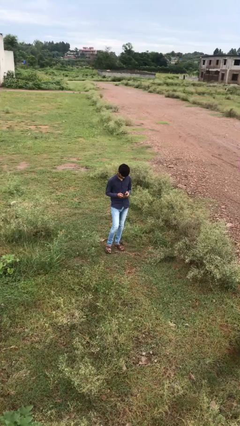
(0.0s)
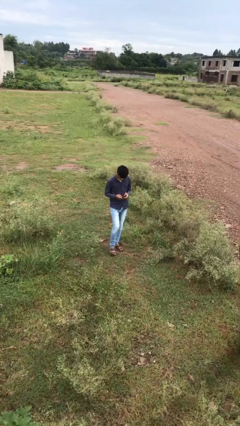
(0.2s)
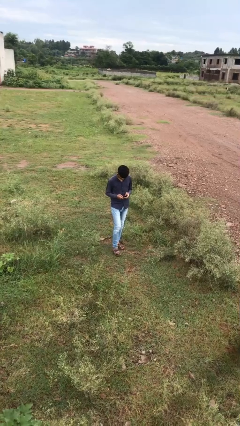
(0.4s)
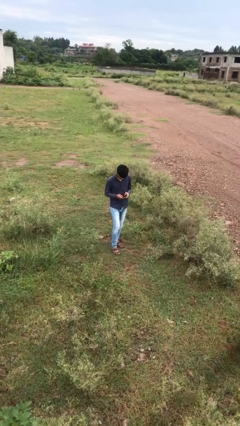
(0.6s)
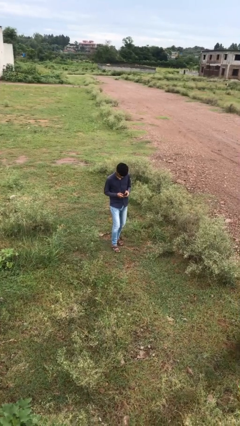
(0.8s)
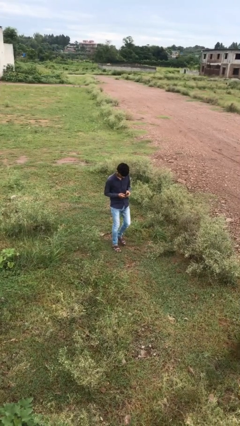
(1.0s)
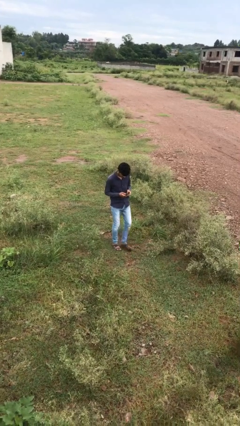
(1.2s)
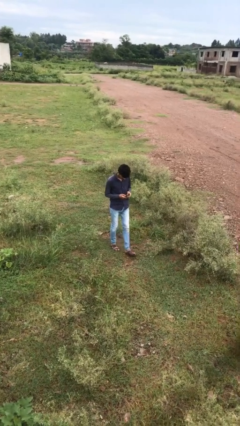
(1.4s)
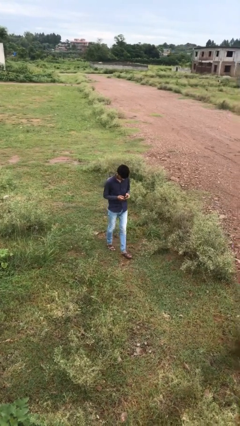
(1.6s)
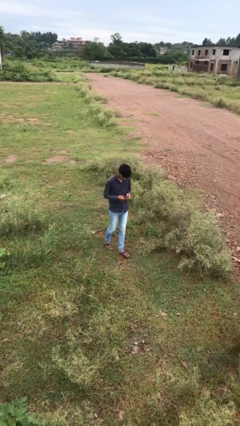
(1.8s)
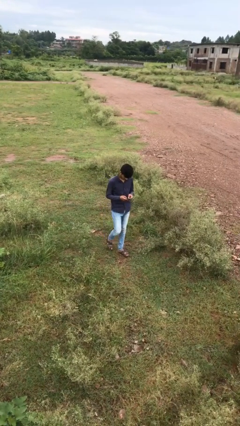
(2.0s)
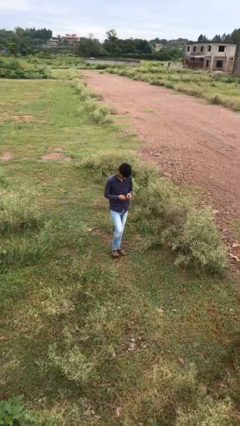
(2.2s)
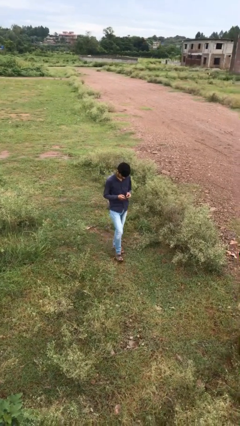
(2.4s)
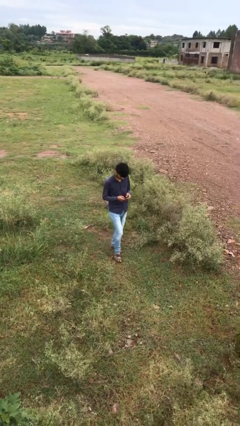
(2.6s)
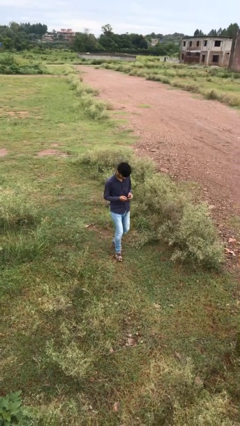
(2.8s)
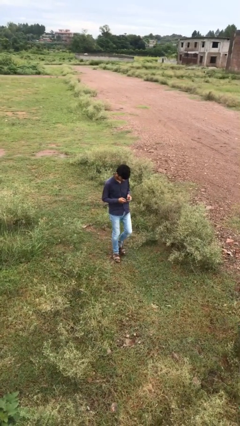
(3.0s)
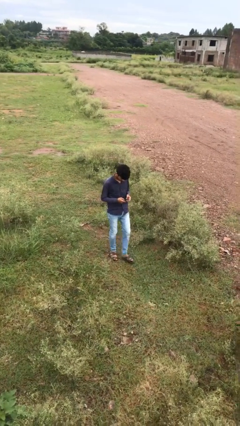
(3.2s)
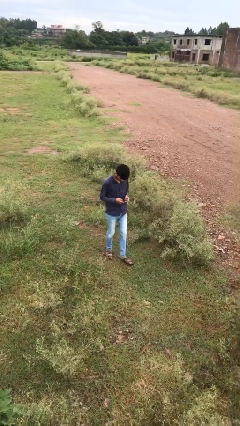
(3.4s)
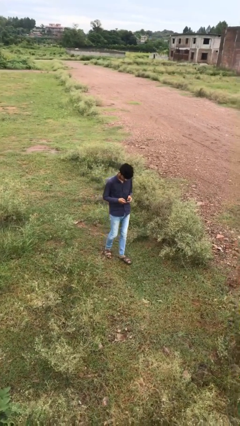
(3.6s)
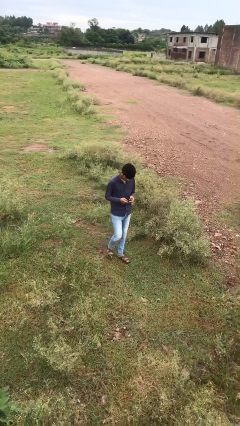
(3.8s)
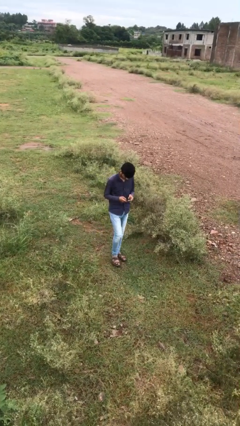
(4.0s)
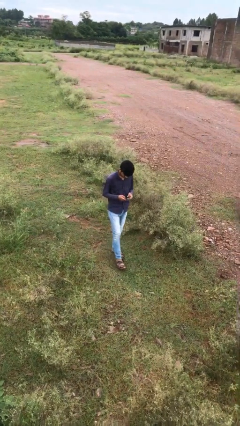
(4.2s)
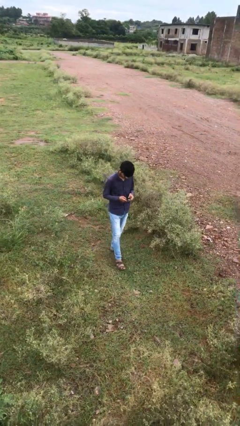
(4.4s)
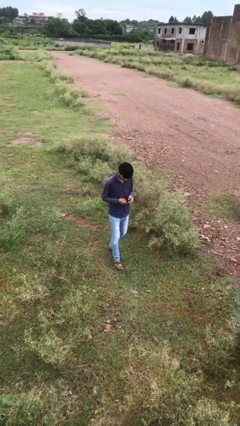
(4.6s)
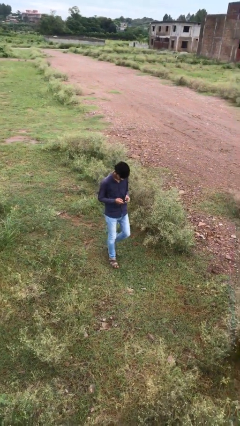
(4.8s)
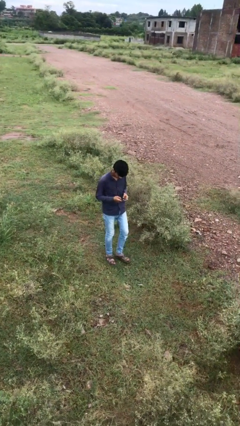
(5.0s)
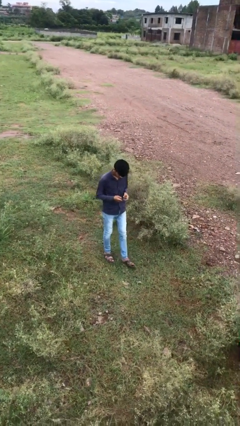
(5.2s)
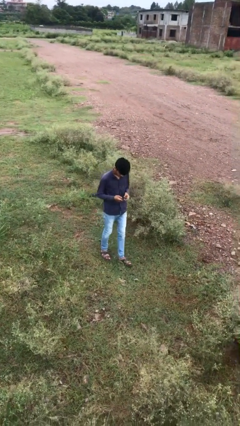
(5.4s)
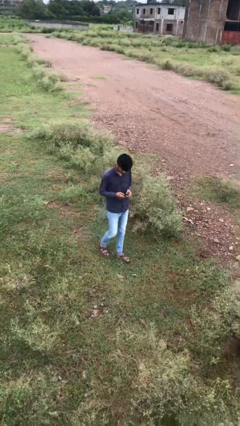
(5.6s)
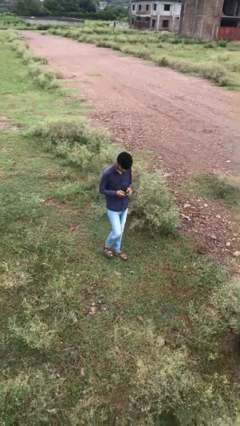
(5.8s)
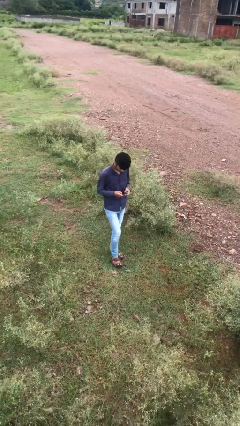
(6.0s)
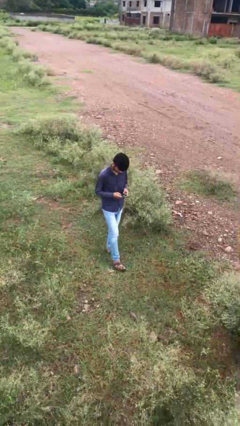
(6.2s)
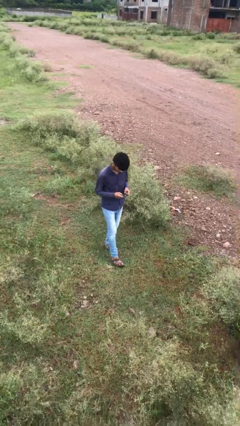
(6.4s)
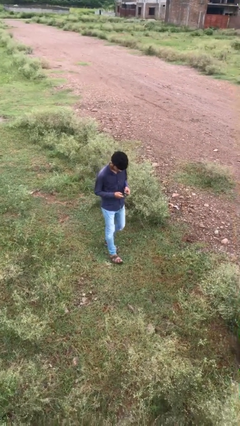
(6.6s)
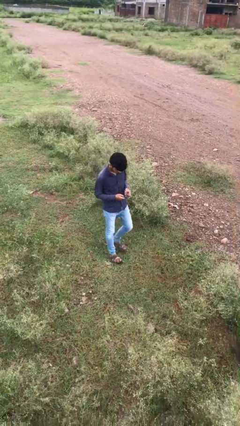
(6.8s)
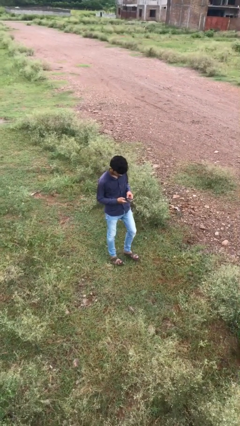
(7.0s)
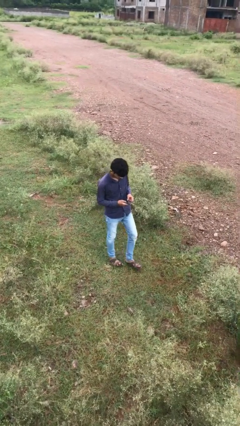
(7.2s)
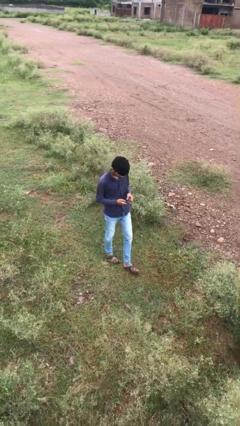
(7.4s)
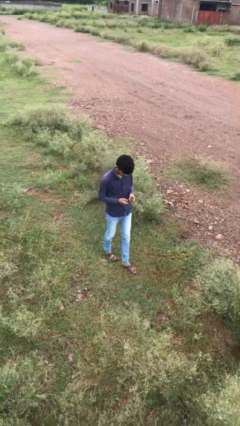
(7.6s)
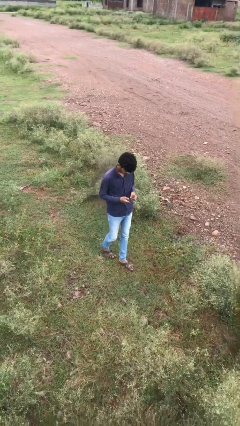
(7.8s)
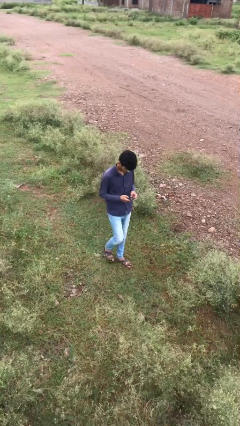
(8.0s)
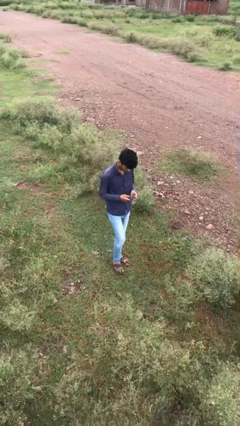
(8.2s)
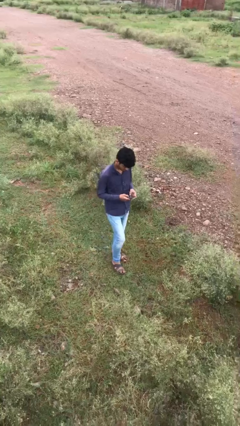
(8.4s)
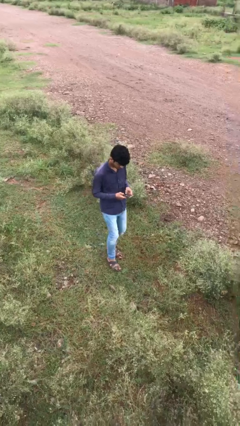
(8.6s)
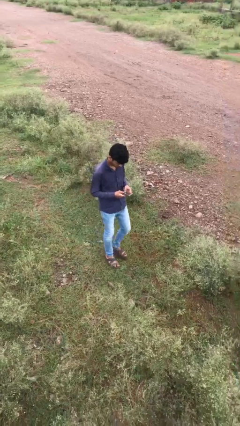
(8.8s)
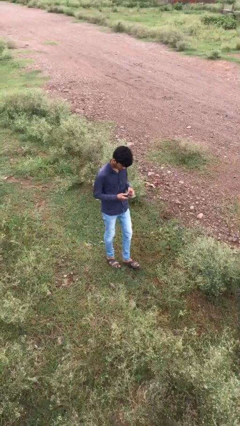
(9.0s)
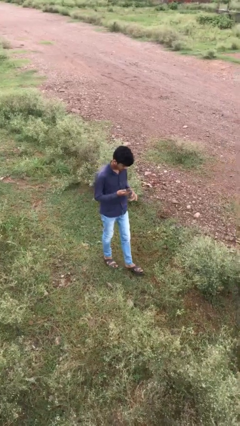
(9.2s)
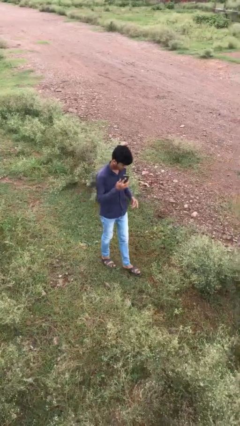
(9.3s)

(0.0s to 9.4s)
person texts on phone

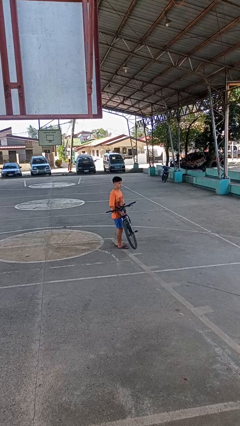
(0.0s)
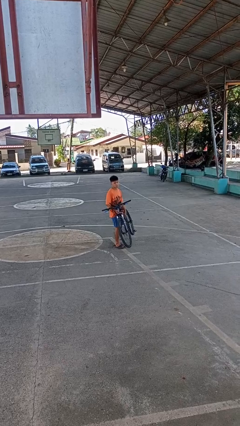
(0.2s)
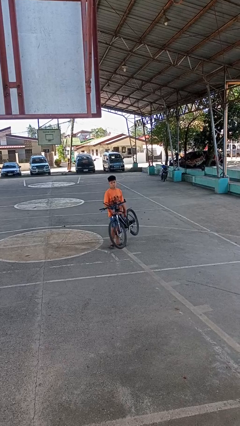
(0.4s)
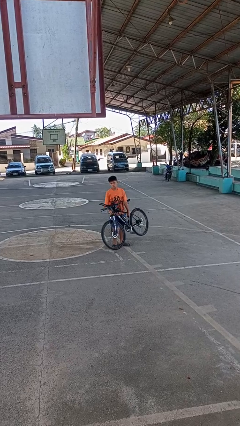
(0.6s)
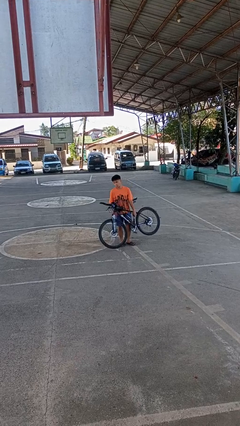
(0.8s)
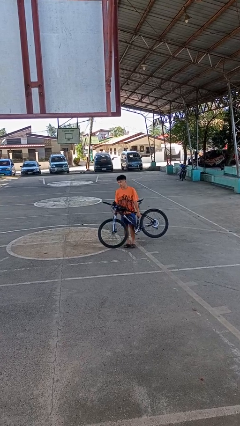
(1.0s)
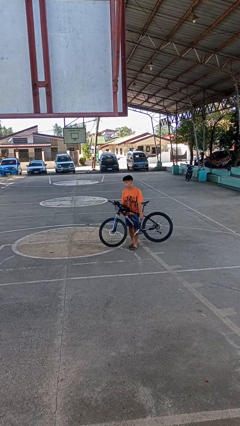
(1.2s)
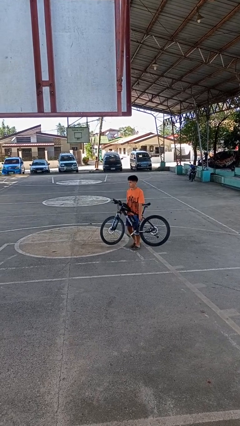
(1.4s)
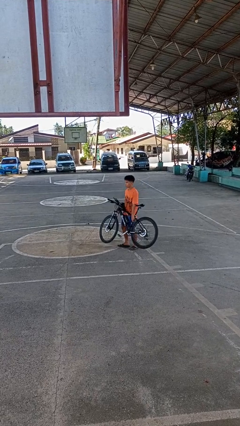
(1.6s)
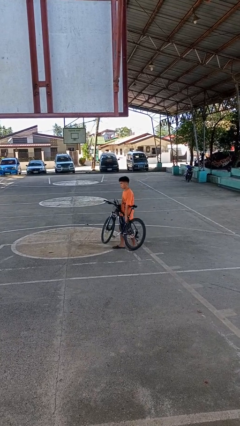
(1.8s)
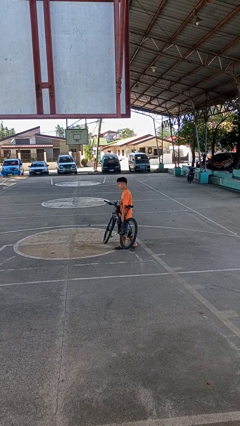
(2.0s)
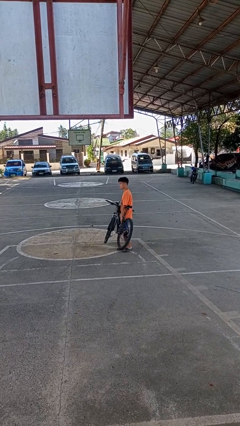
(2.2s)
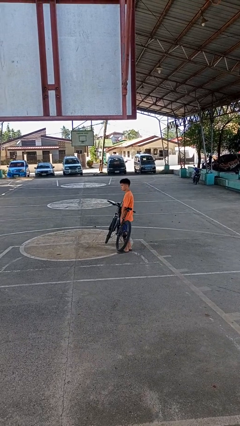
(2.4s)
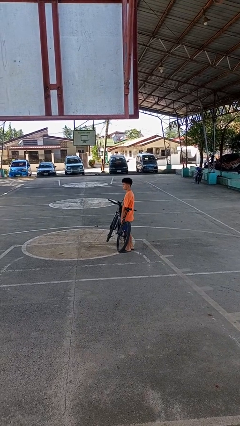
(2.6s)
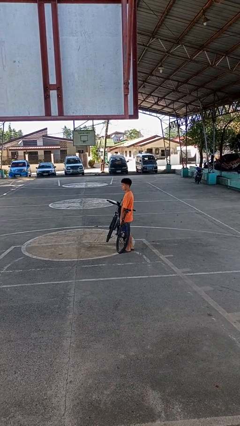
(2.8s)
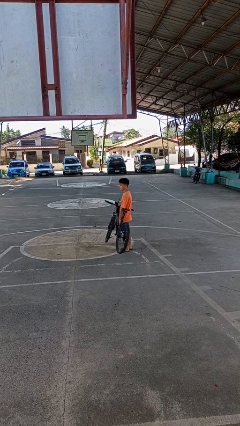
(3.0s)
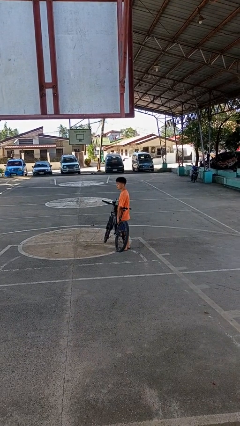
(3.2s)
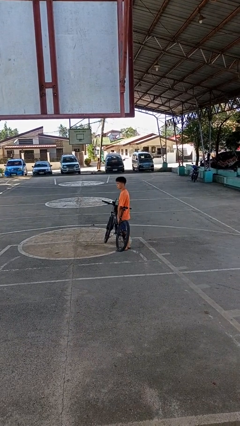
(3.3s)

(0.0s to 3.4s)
person carries bicycle

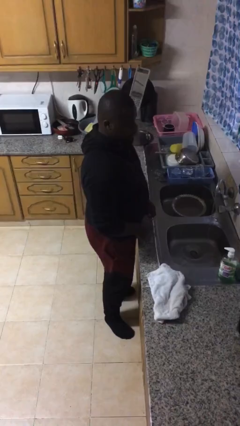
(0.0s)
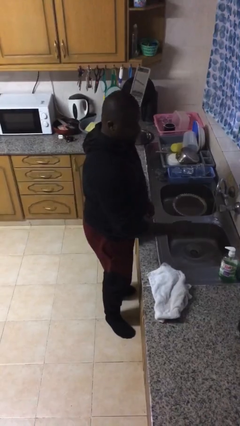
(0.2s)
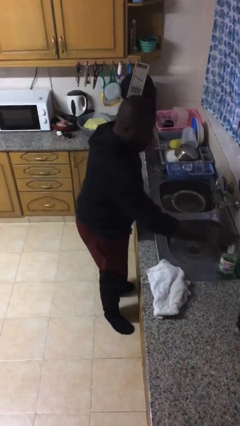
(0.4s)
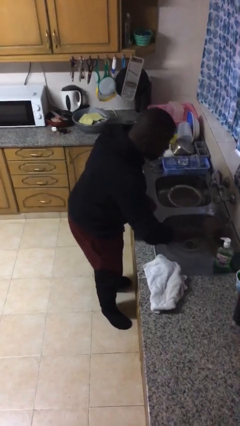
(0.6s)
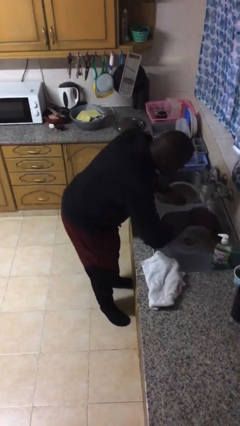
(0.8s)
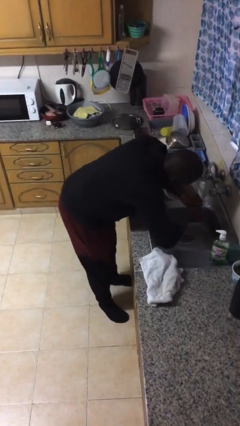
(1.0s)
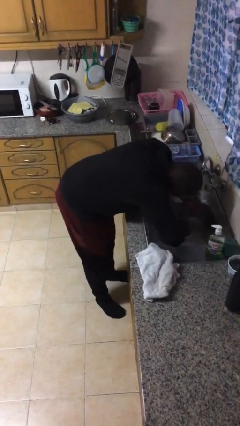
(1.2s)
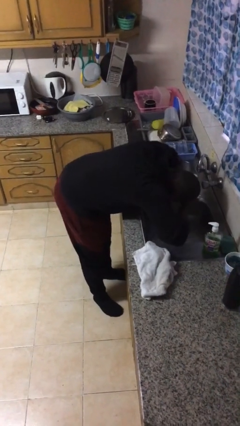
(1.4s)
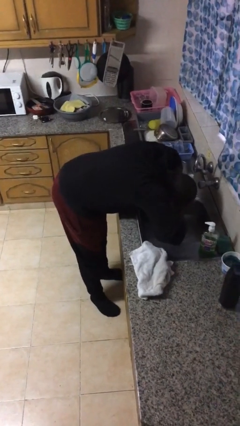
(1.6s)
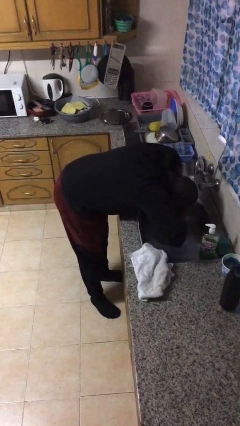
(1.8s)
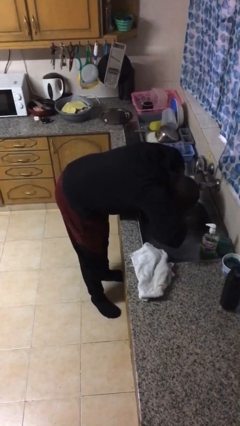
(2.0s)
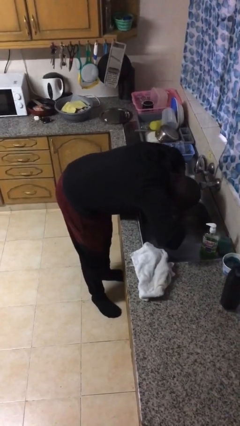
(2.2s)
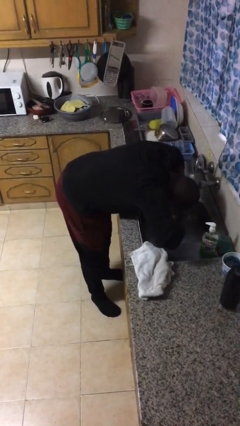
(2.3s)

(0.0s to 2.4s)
person washes face

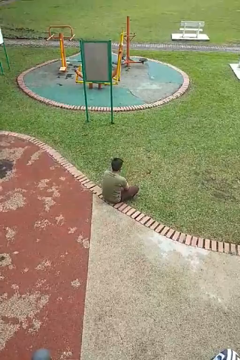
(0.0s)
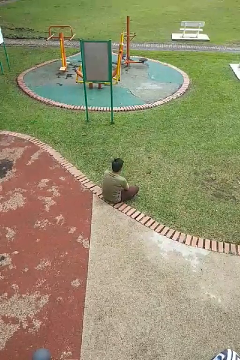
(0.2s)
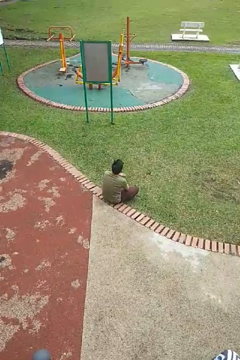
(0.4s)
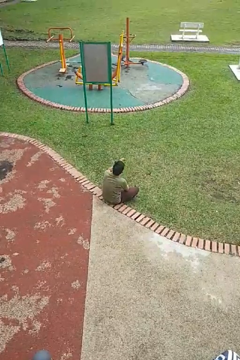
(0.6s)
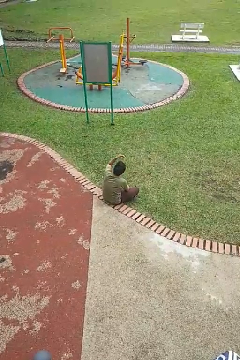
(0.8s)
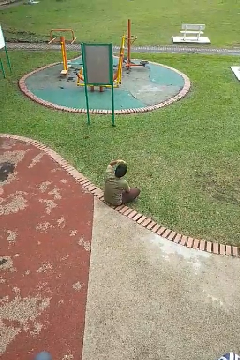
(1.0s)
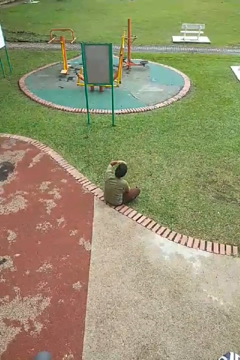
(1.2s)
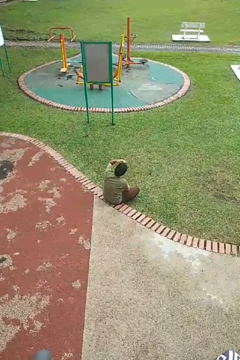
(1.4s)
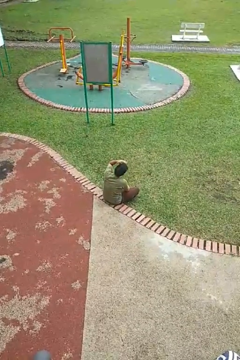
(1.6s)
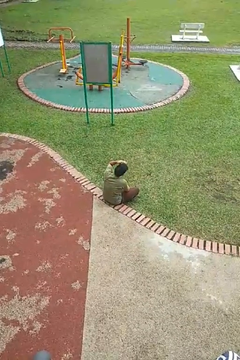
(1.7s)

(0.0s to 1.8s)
person shades eyes

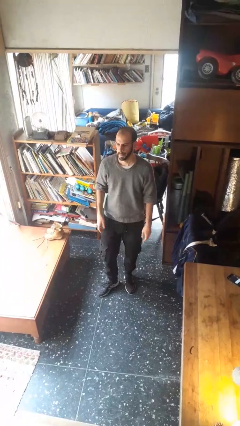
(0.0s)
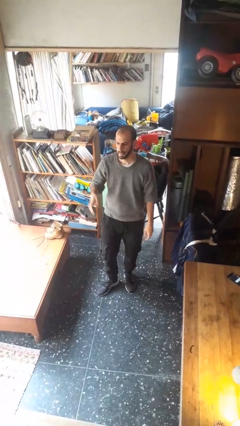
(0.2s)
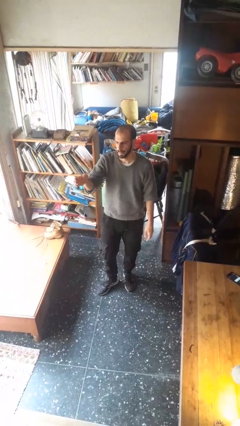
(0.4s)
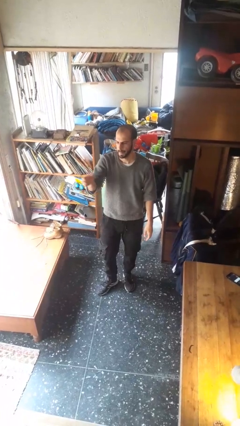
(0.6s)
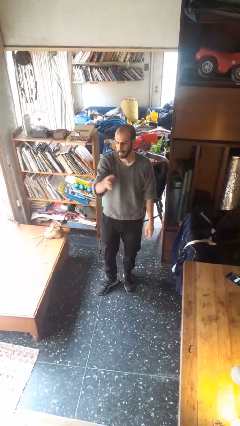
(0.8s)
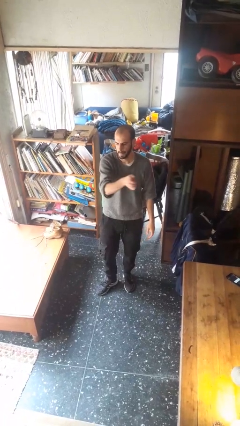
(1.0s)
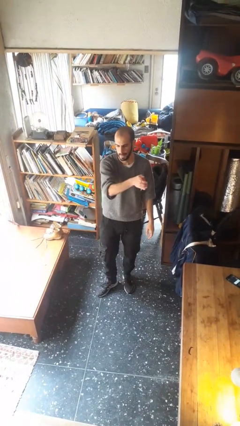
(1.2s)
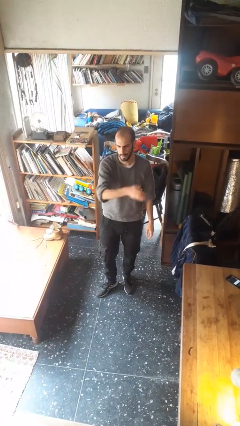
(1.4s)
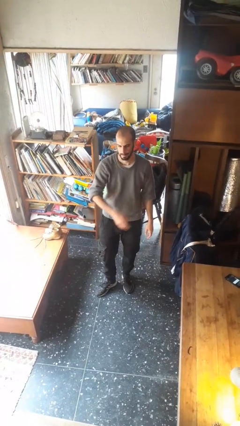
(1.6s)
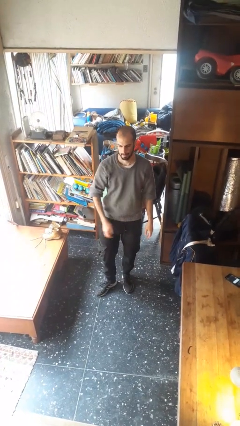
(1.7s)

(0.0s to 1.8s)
person gestures swipe left
